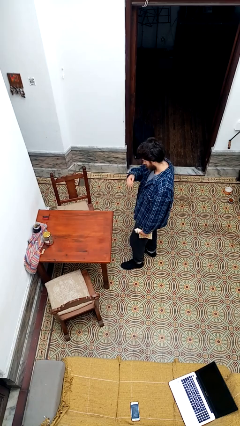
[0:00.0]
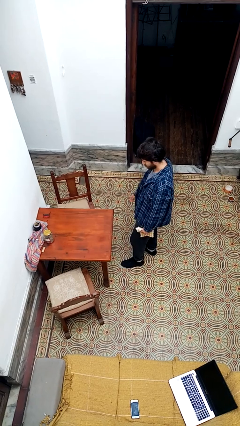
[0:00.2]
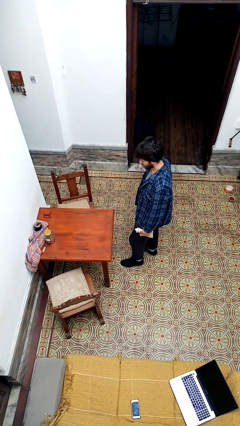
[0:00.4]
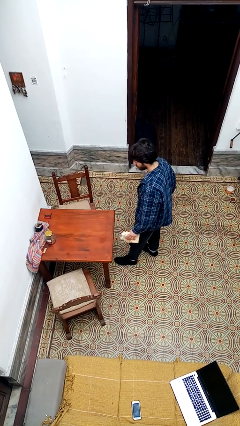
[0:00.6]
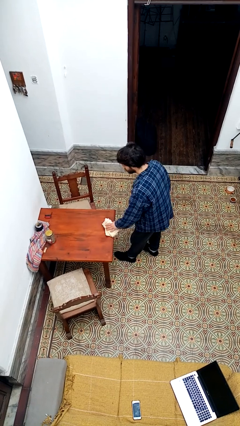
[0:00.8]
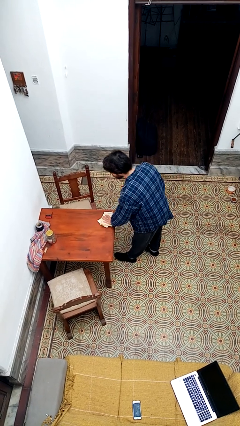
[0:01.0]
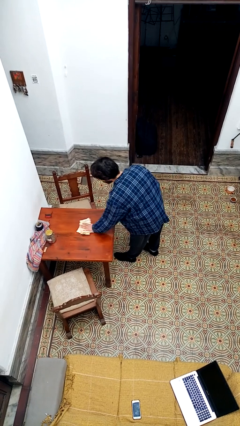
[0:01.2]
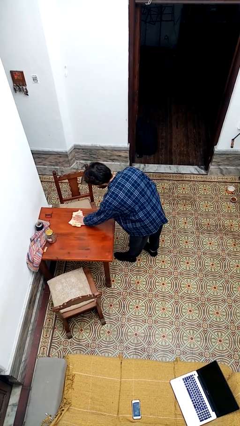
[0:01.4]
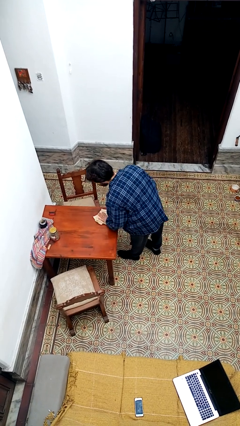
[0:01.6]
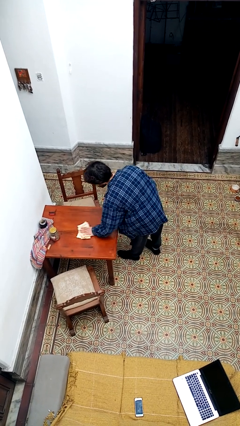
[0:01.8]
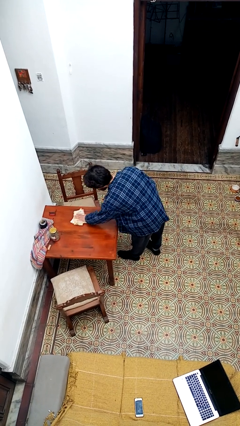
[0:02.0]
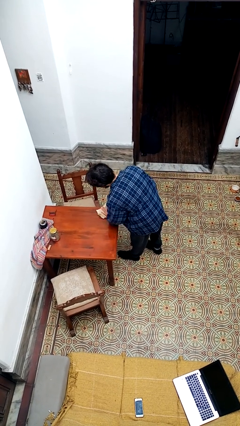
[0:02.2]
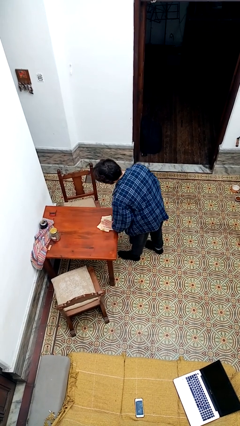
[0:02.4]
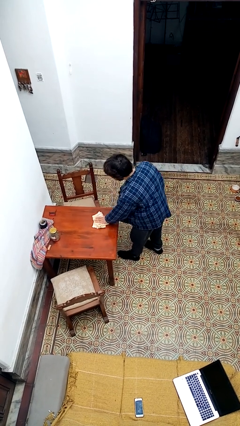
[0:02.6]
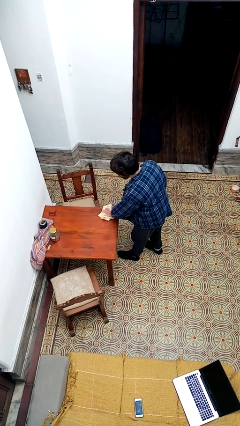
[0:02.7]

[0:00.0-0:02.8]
person cleans table with rag

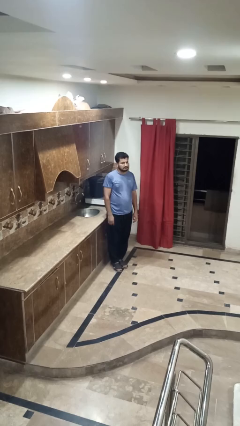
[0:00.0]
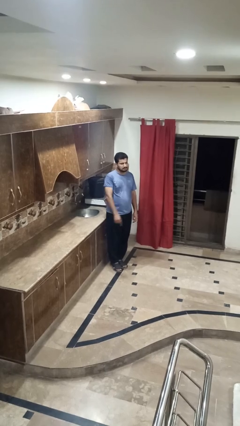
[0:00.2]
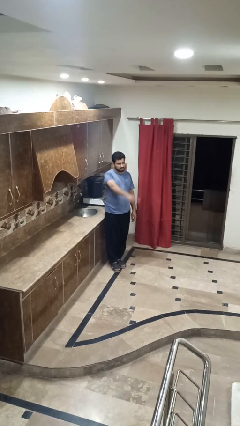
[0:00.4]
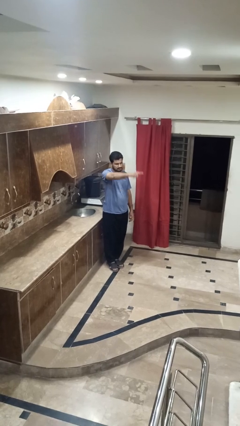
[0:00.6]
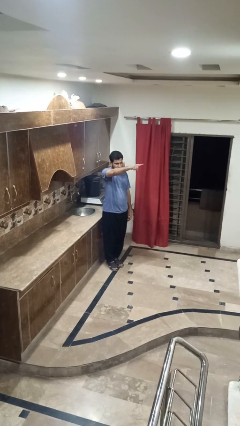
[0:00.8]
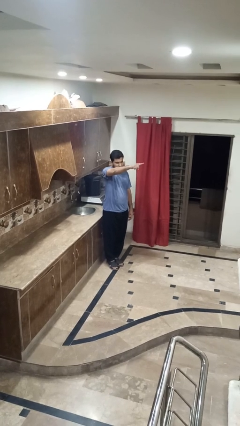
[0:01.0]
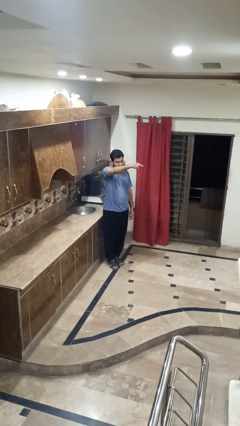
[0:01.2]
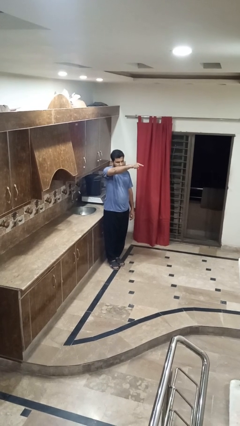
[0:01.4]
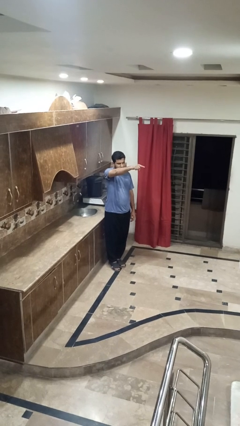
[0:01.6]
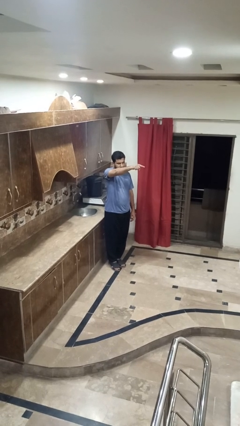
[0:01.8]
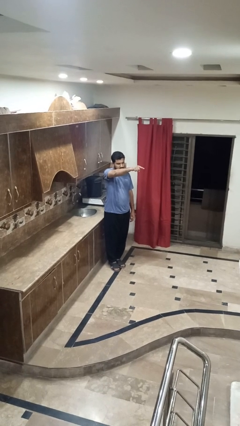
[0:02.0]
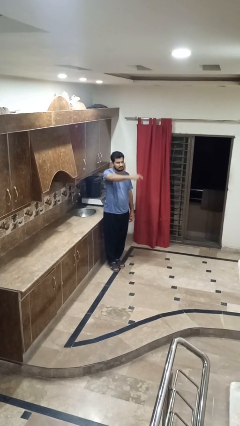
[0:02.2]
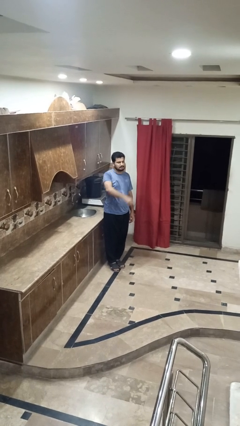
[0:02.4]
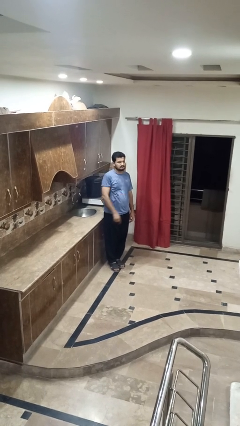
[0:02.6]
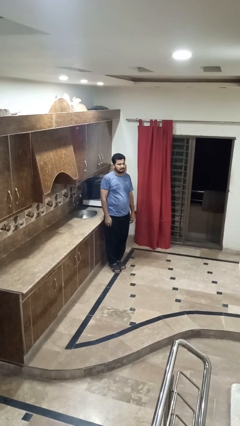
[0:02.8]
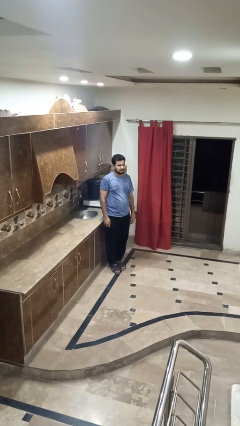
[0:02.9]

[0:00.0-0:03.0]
person points at person

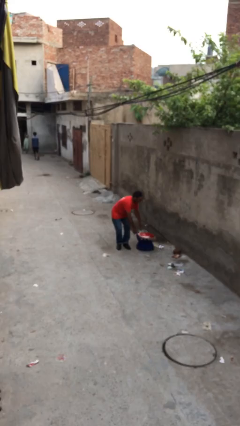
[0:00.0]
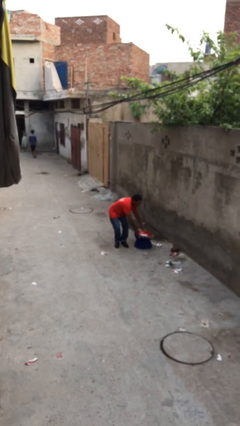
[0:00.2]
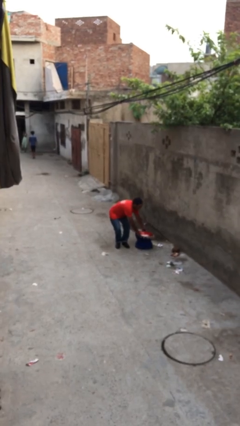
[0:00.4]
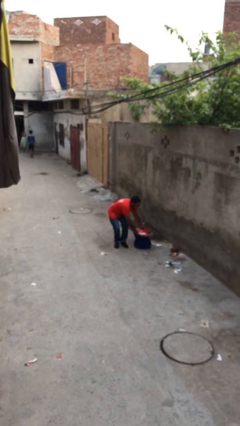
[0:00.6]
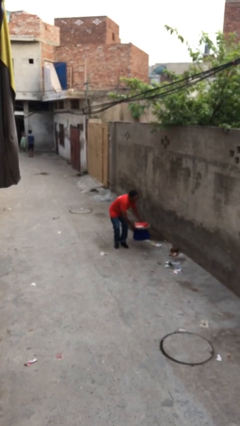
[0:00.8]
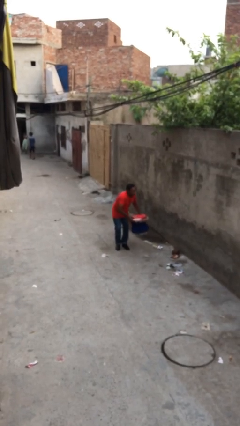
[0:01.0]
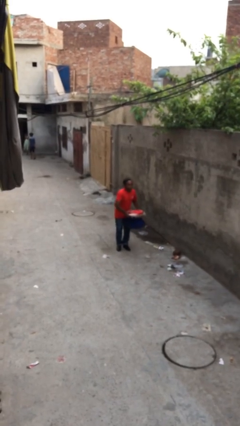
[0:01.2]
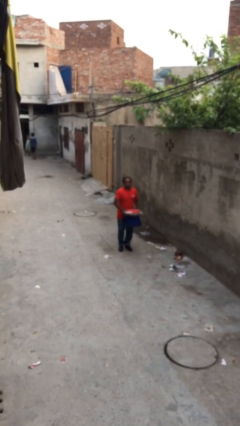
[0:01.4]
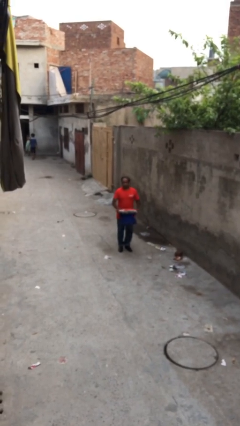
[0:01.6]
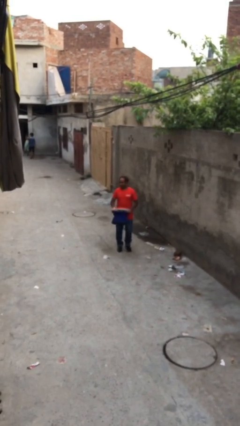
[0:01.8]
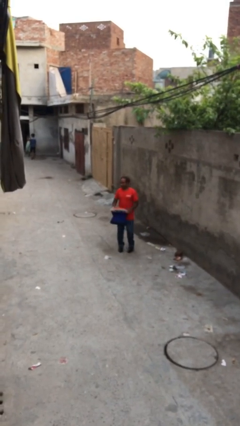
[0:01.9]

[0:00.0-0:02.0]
person picks up object from floor

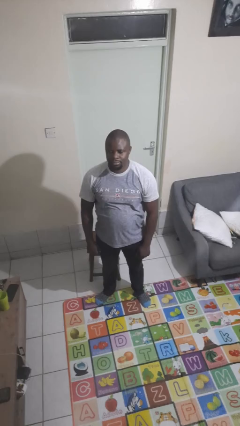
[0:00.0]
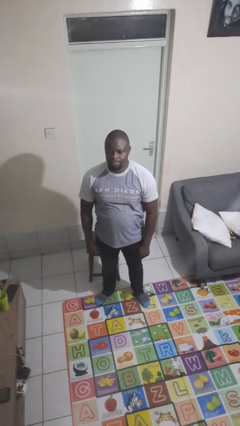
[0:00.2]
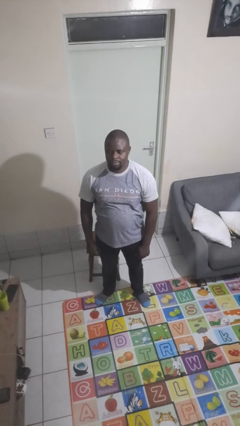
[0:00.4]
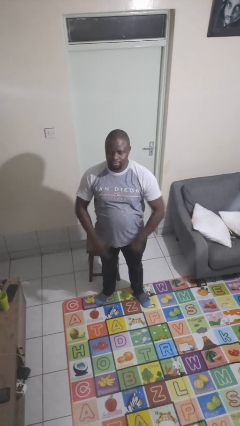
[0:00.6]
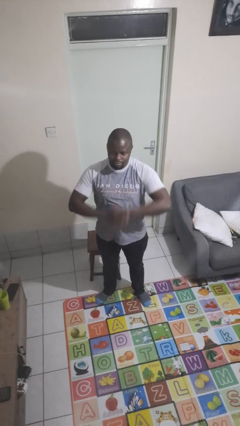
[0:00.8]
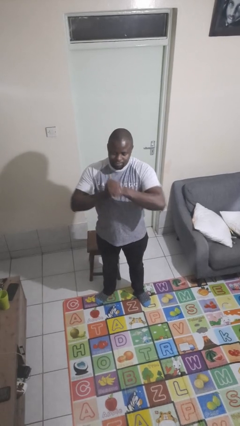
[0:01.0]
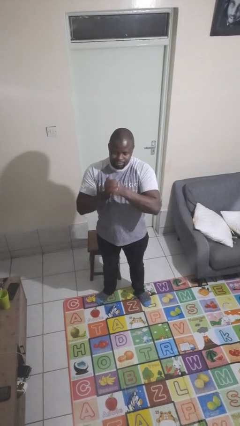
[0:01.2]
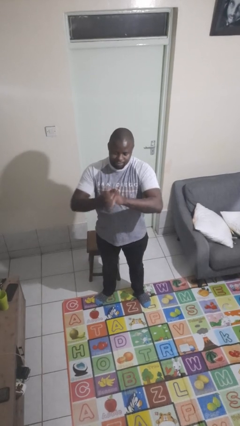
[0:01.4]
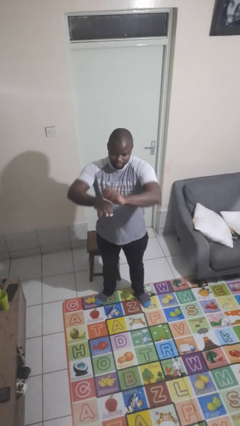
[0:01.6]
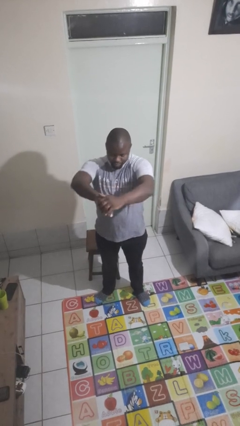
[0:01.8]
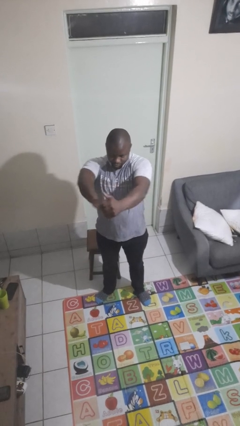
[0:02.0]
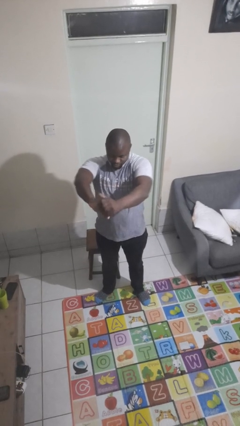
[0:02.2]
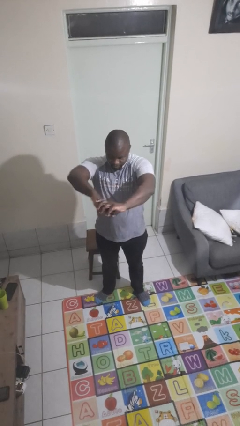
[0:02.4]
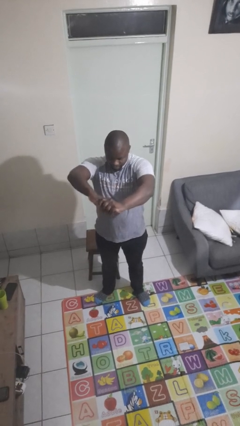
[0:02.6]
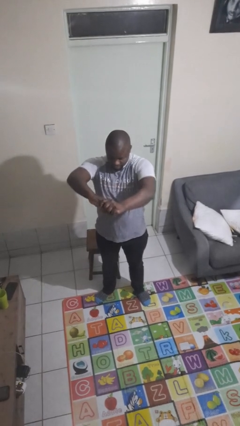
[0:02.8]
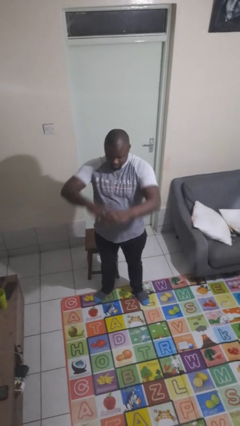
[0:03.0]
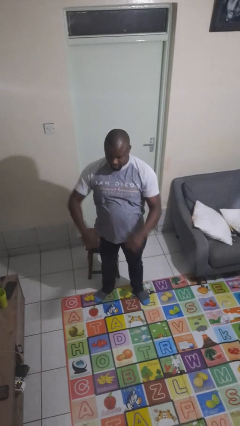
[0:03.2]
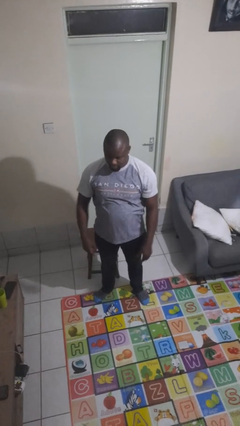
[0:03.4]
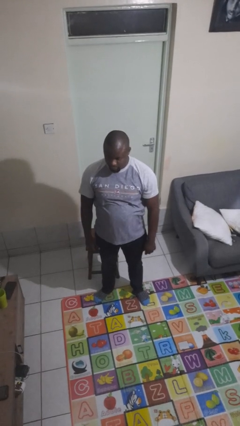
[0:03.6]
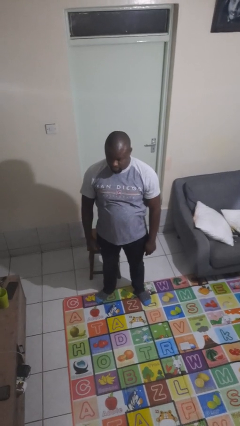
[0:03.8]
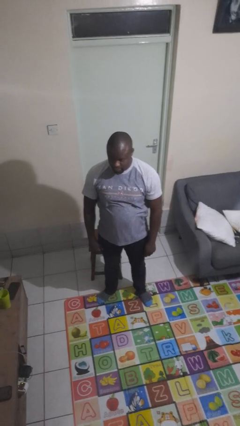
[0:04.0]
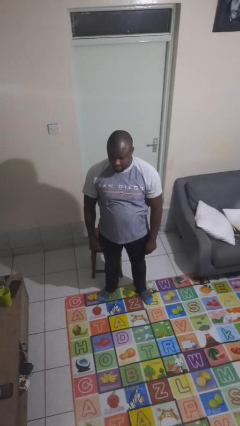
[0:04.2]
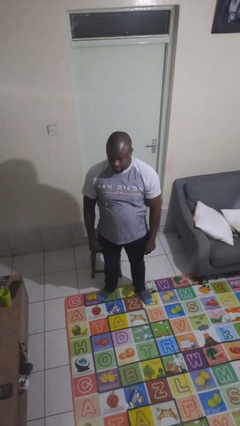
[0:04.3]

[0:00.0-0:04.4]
person cracks knuckles

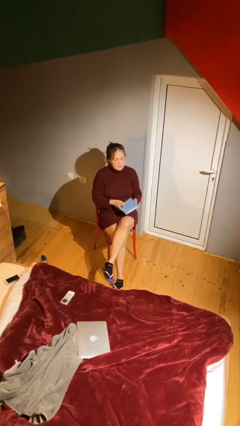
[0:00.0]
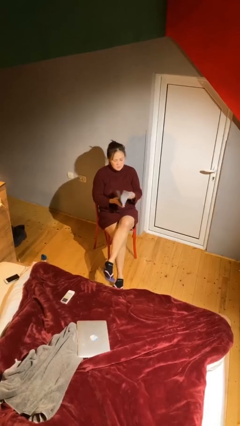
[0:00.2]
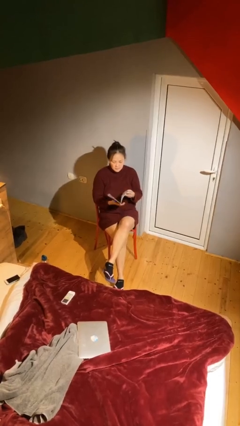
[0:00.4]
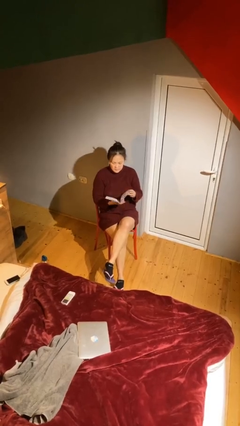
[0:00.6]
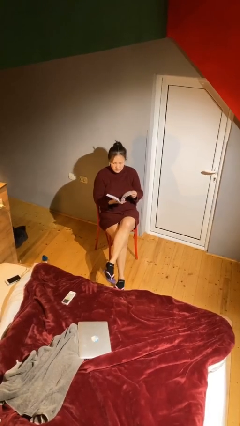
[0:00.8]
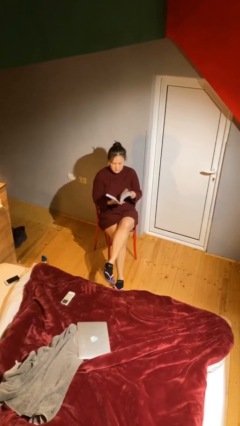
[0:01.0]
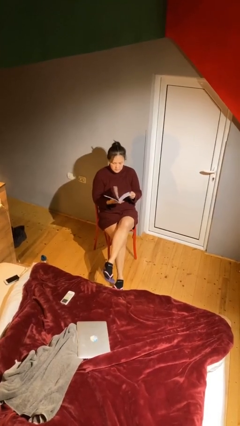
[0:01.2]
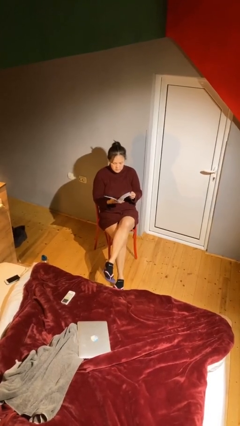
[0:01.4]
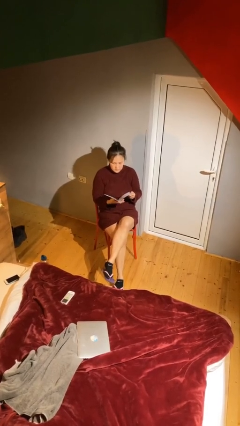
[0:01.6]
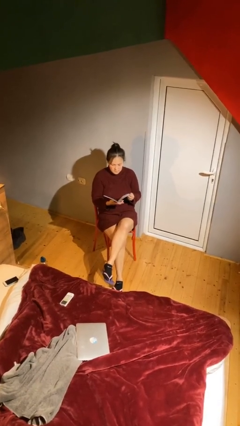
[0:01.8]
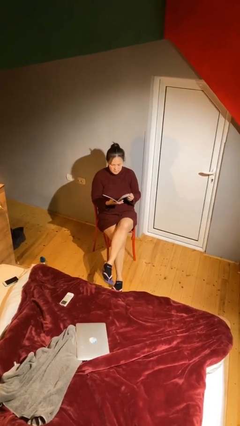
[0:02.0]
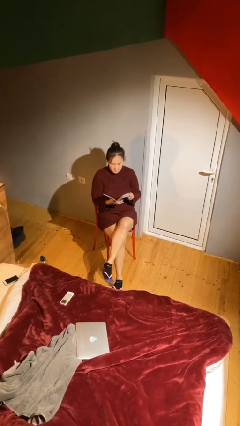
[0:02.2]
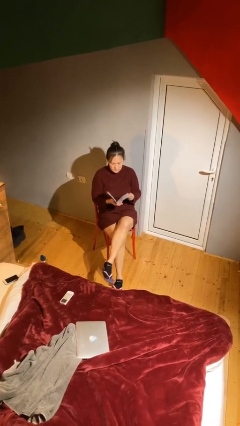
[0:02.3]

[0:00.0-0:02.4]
person reads document

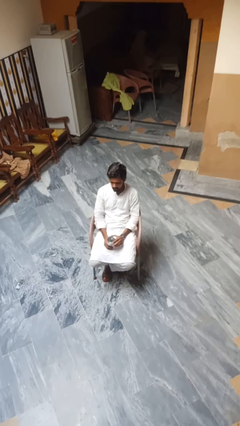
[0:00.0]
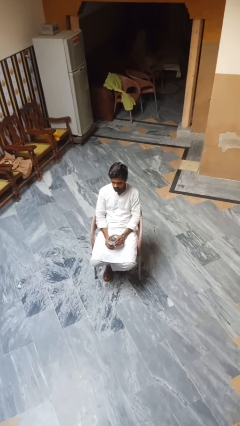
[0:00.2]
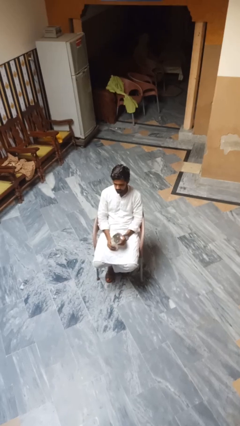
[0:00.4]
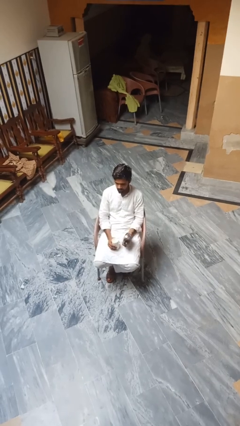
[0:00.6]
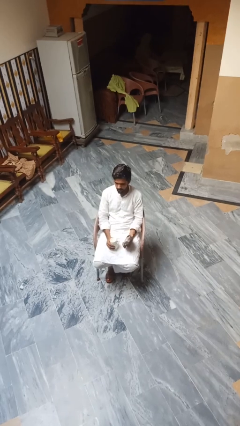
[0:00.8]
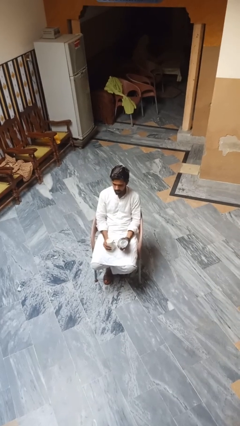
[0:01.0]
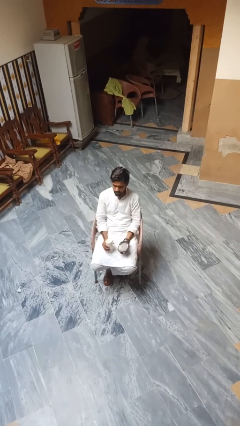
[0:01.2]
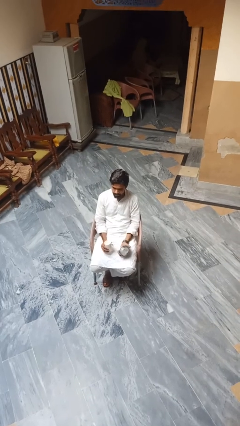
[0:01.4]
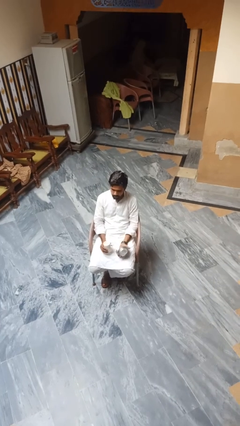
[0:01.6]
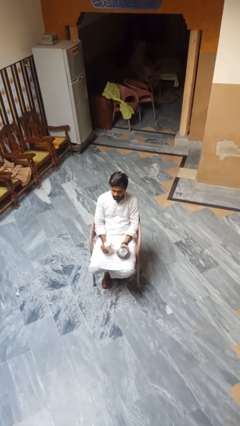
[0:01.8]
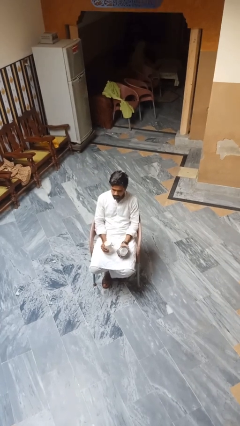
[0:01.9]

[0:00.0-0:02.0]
person opens beverage can

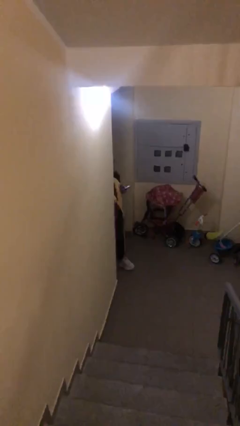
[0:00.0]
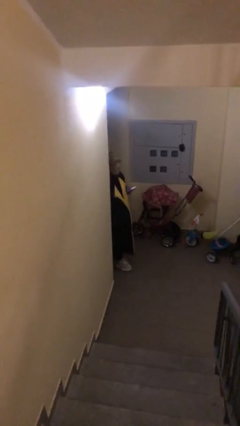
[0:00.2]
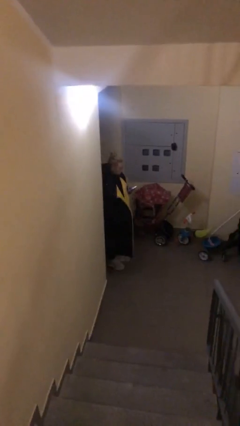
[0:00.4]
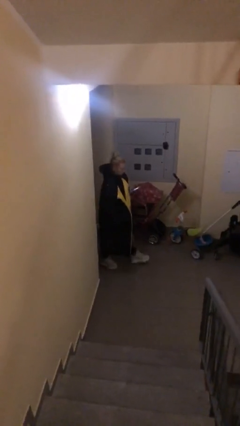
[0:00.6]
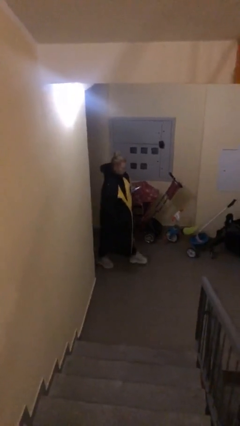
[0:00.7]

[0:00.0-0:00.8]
person enters scene through structure
